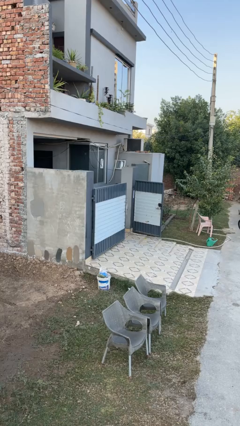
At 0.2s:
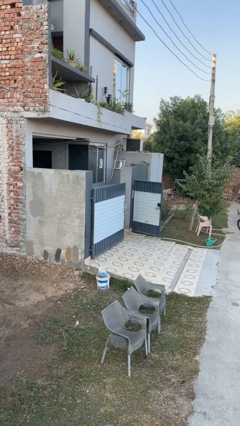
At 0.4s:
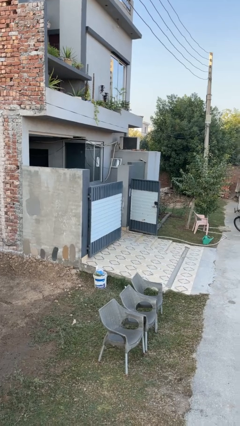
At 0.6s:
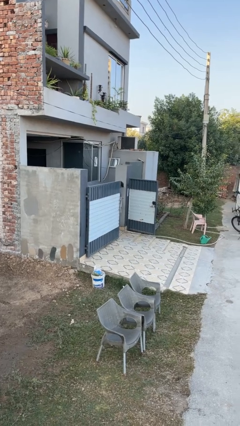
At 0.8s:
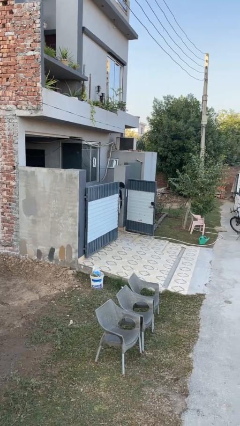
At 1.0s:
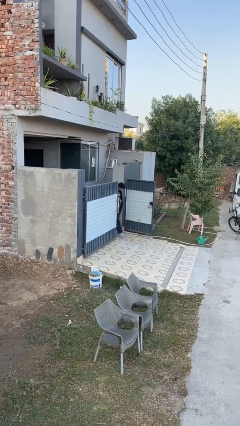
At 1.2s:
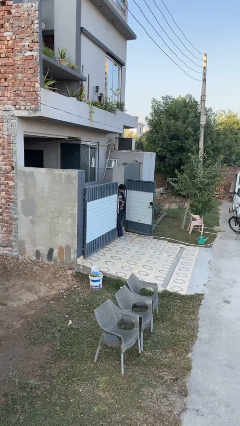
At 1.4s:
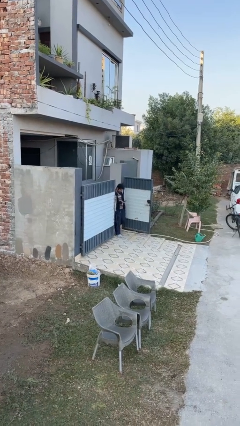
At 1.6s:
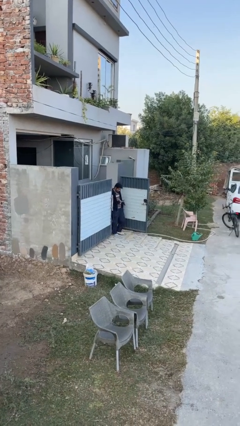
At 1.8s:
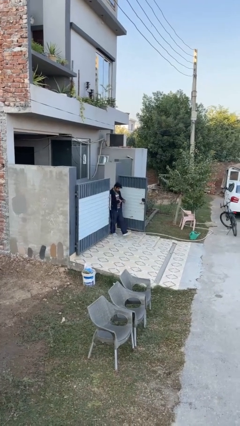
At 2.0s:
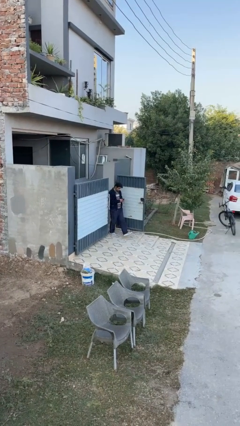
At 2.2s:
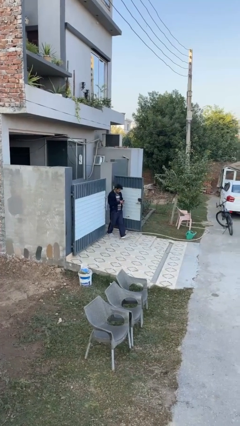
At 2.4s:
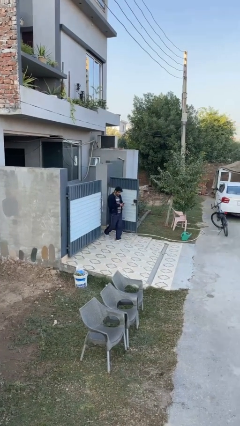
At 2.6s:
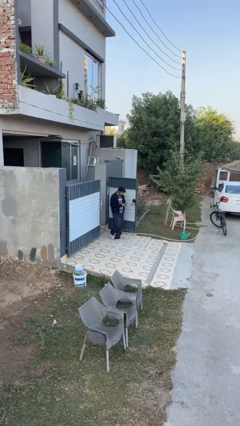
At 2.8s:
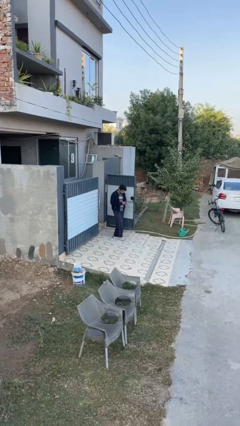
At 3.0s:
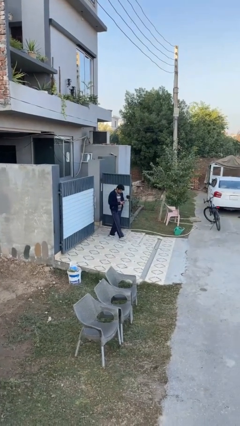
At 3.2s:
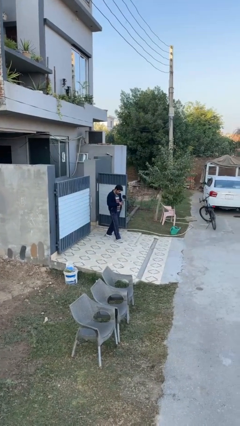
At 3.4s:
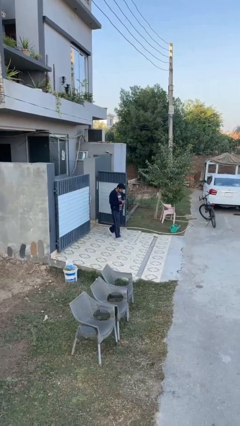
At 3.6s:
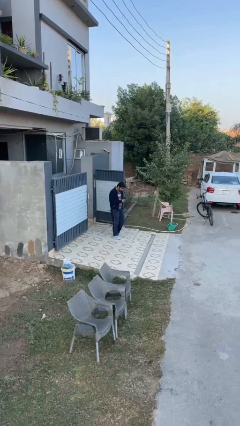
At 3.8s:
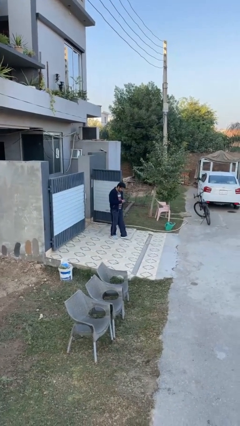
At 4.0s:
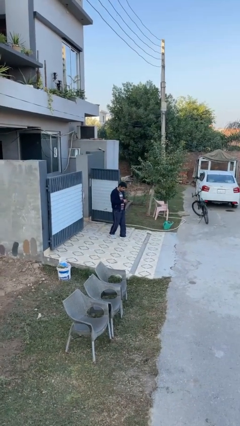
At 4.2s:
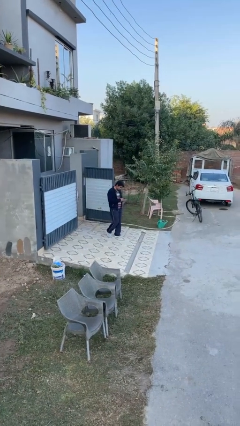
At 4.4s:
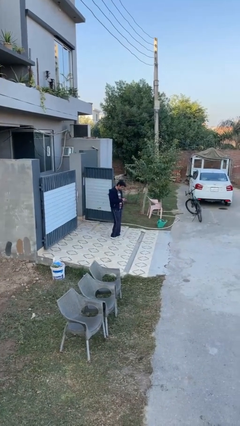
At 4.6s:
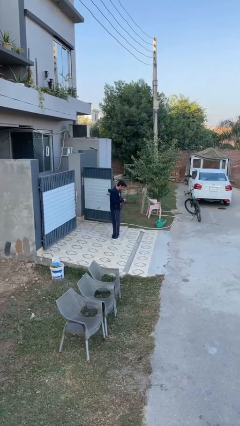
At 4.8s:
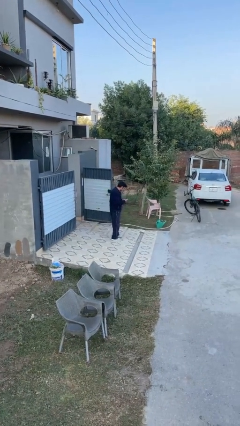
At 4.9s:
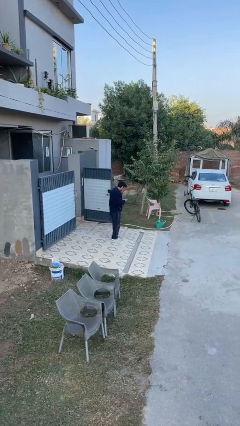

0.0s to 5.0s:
person enters scene through structure

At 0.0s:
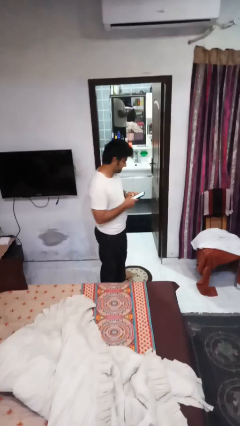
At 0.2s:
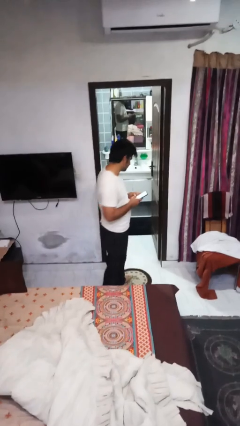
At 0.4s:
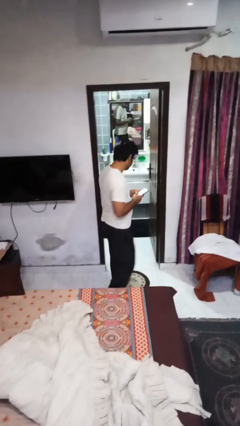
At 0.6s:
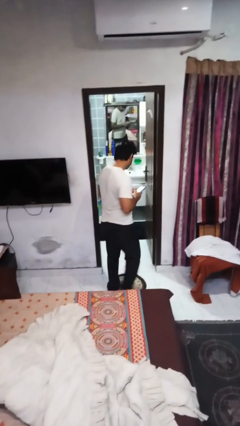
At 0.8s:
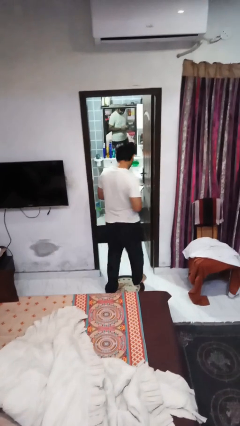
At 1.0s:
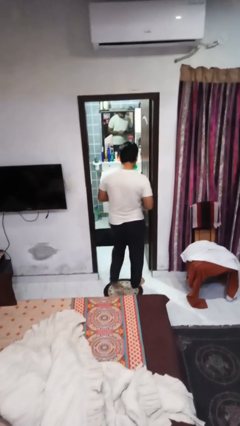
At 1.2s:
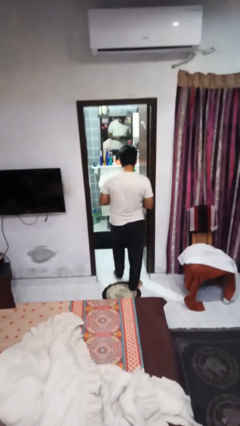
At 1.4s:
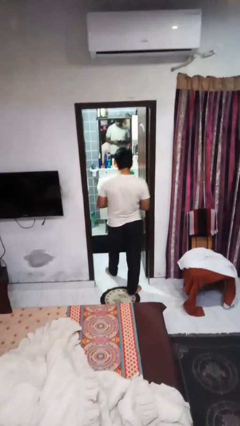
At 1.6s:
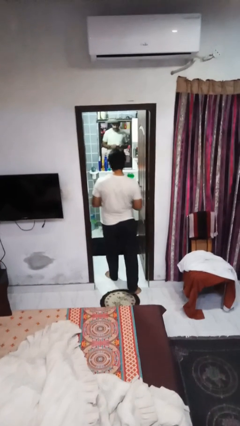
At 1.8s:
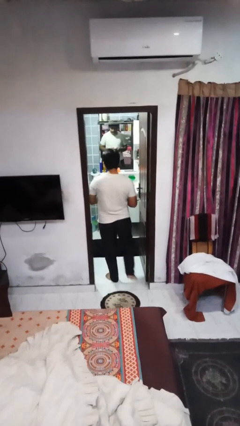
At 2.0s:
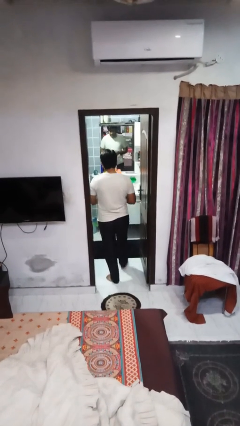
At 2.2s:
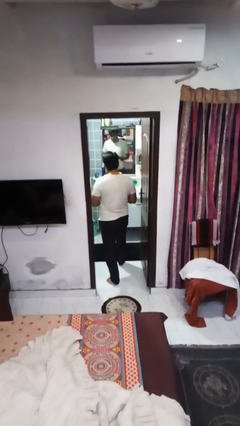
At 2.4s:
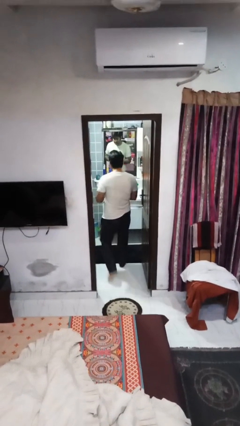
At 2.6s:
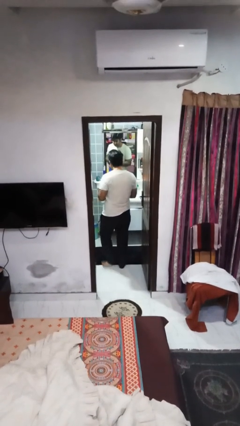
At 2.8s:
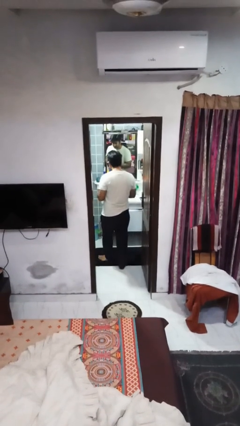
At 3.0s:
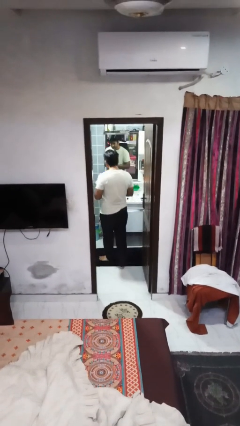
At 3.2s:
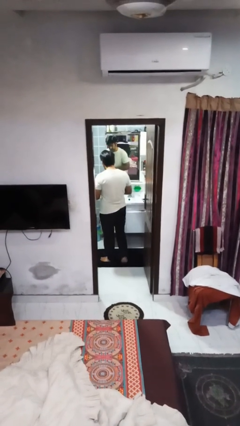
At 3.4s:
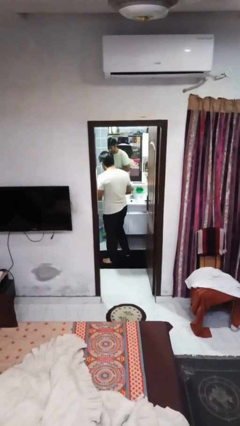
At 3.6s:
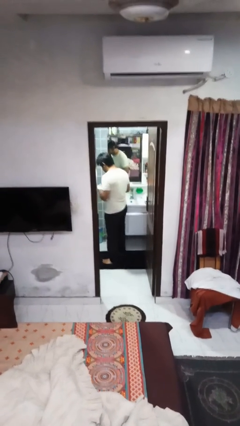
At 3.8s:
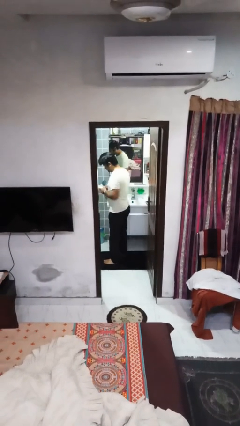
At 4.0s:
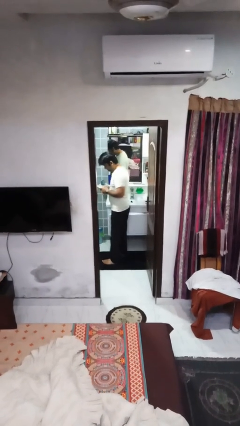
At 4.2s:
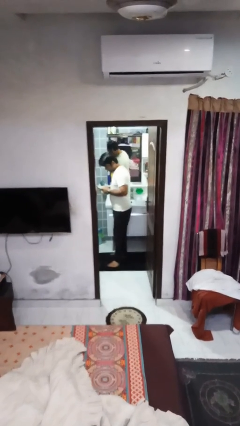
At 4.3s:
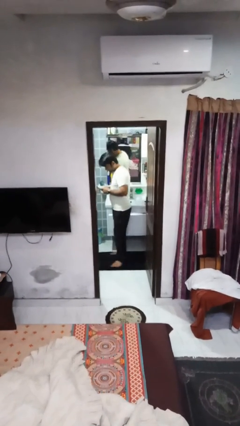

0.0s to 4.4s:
person exits scene through structure

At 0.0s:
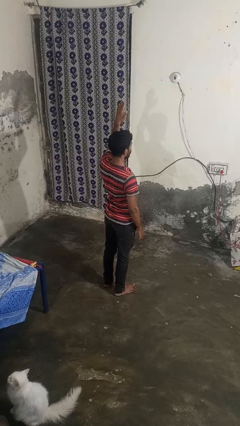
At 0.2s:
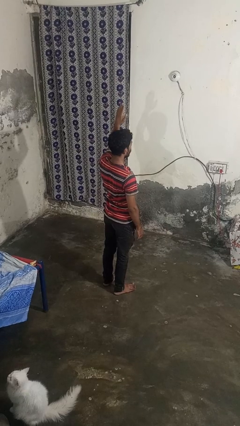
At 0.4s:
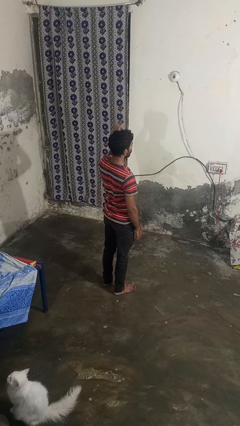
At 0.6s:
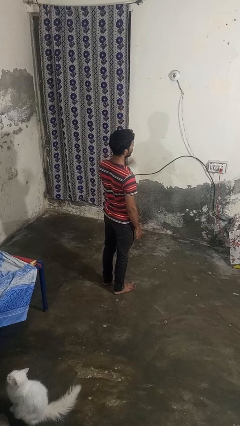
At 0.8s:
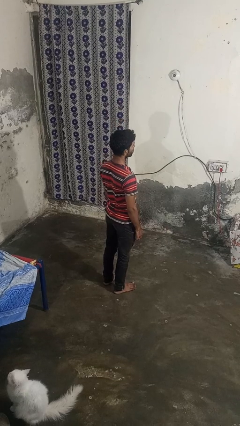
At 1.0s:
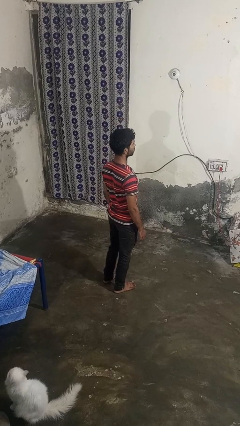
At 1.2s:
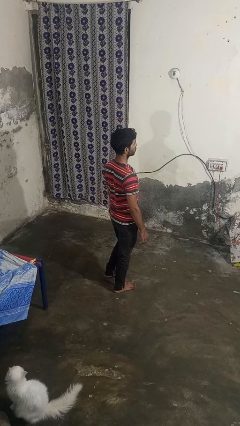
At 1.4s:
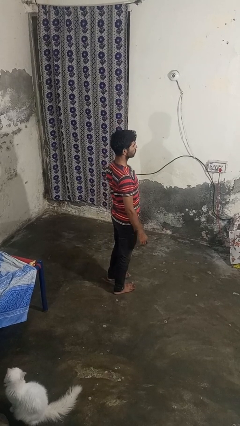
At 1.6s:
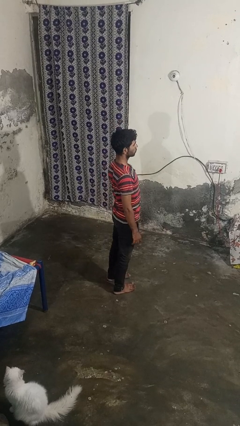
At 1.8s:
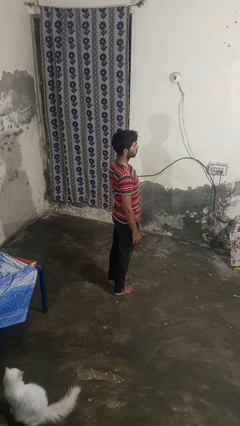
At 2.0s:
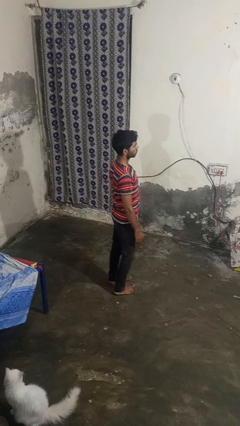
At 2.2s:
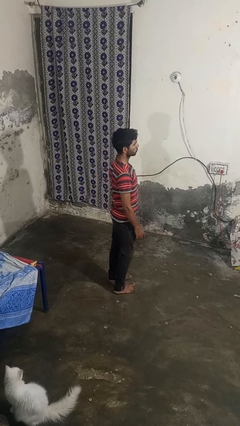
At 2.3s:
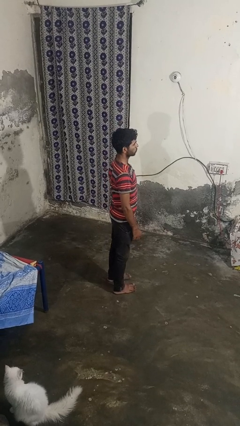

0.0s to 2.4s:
person gestures lower hand

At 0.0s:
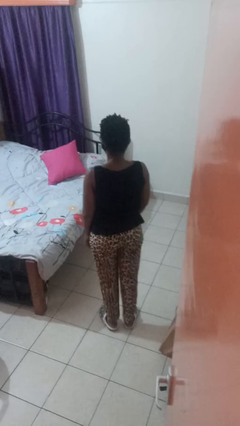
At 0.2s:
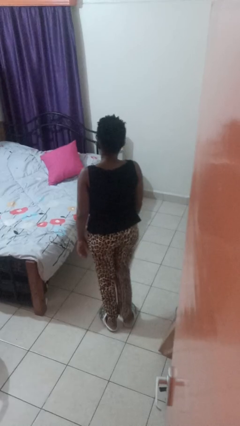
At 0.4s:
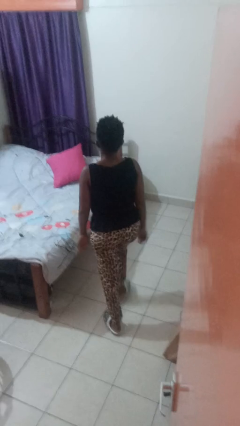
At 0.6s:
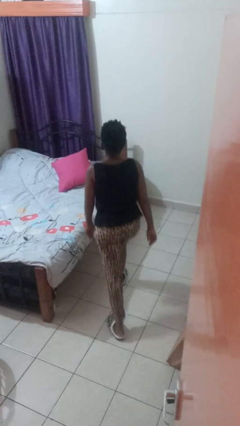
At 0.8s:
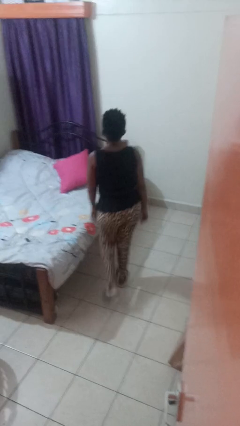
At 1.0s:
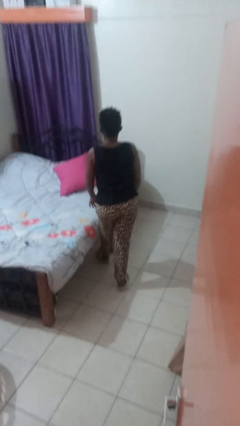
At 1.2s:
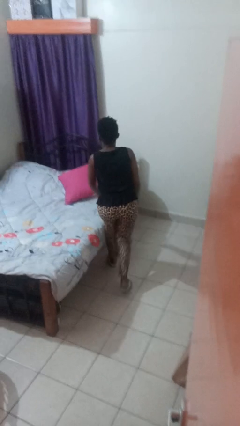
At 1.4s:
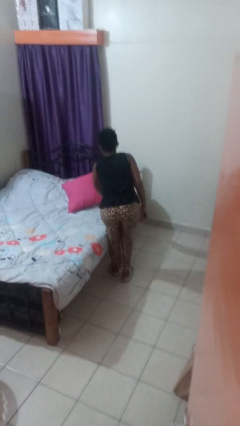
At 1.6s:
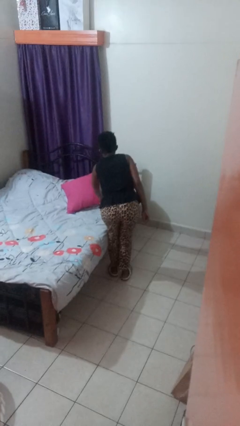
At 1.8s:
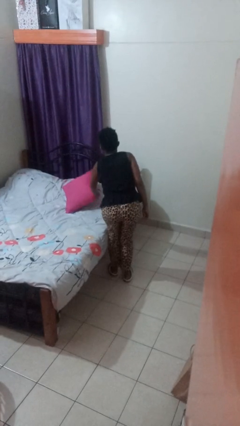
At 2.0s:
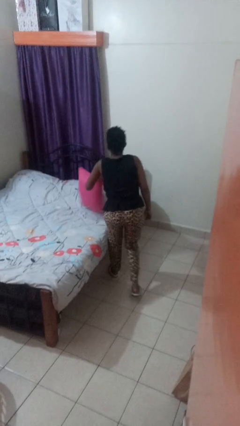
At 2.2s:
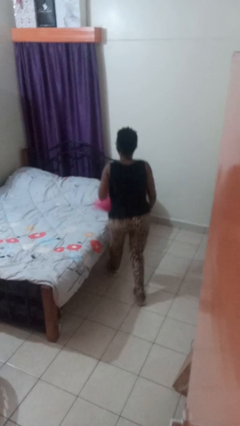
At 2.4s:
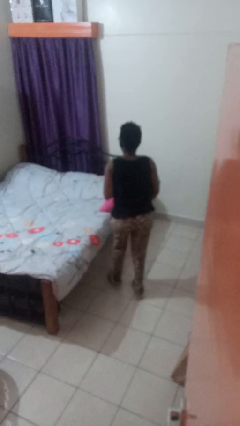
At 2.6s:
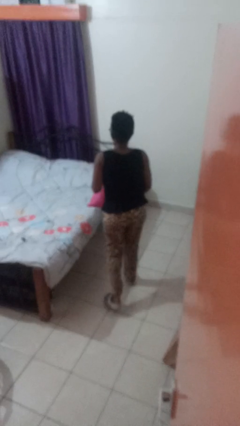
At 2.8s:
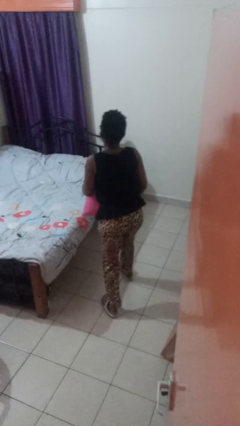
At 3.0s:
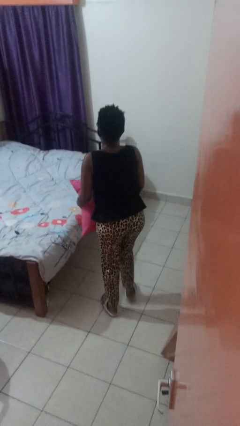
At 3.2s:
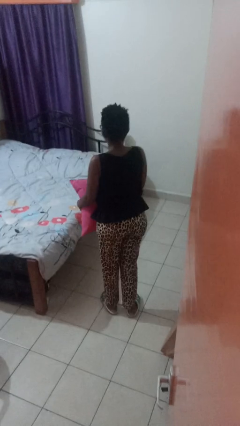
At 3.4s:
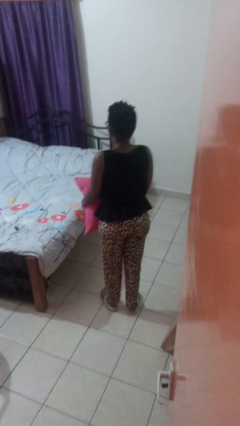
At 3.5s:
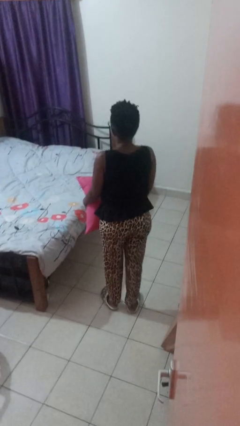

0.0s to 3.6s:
person picks up object from bed

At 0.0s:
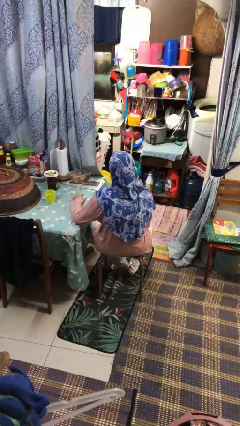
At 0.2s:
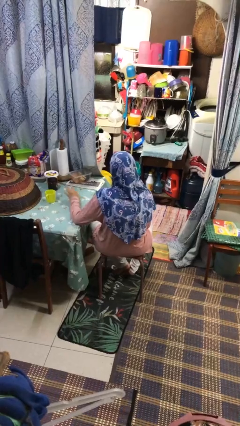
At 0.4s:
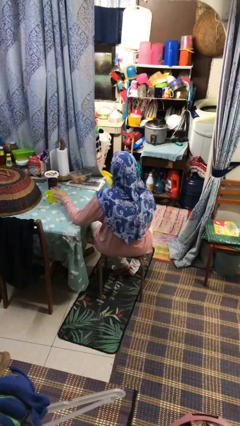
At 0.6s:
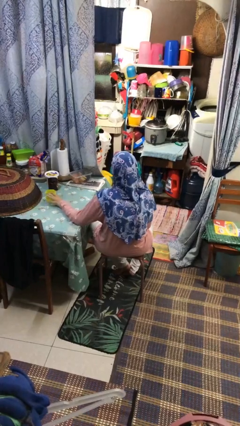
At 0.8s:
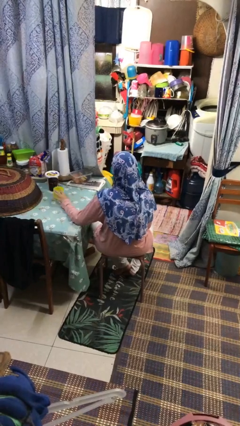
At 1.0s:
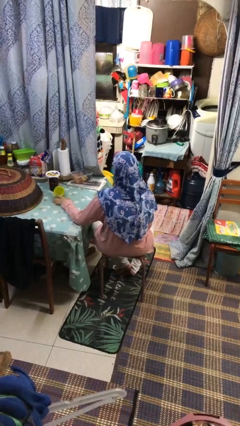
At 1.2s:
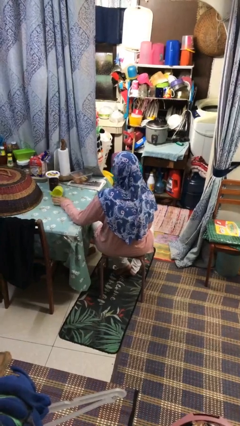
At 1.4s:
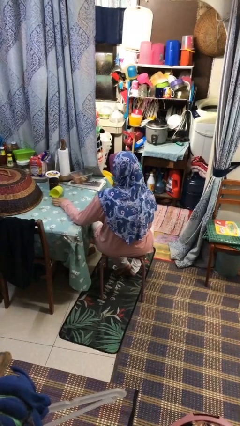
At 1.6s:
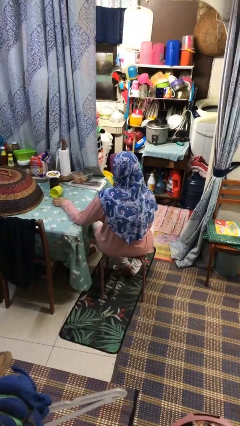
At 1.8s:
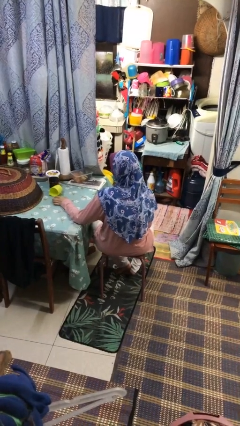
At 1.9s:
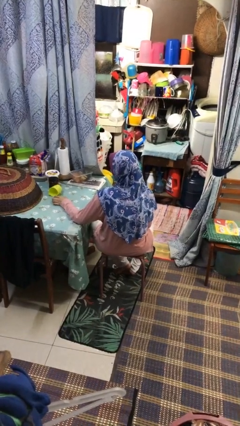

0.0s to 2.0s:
person knocks over glass

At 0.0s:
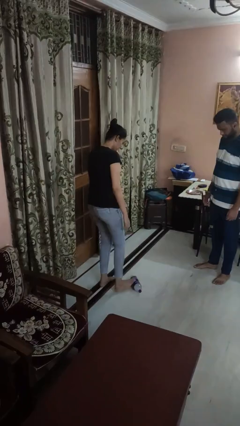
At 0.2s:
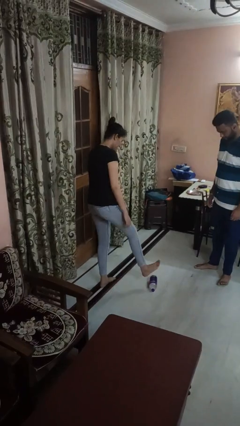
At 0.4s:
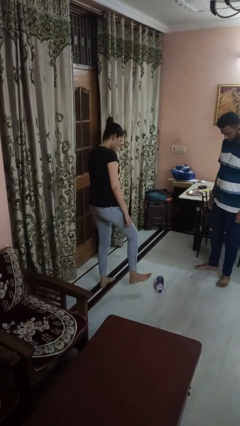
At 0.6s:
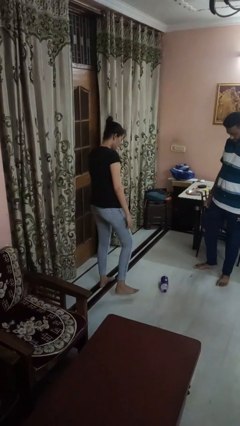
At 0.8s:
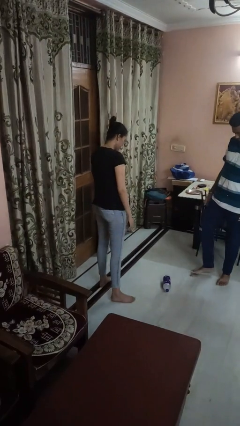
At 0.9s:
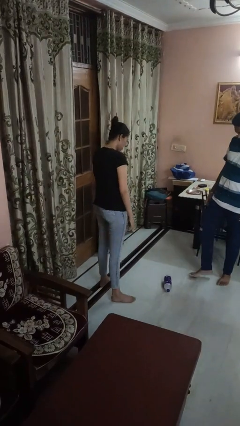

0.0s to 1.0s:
person kicks object to person
